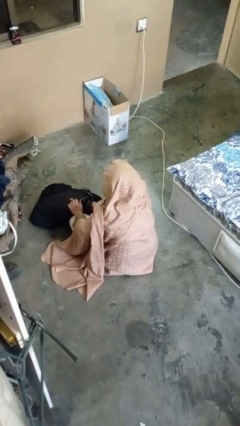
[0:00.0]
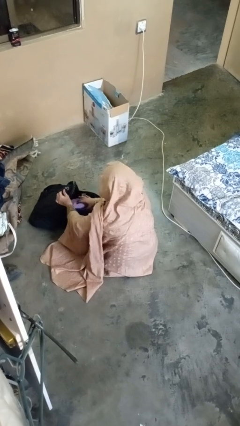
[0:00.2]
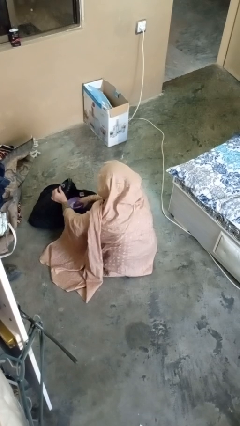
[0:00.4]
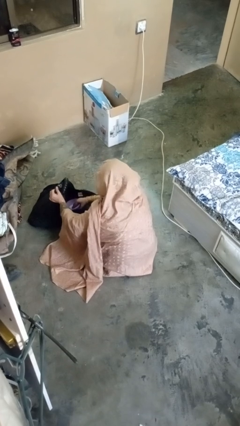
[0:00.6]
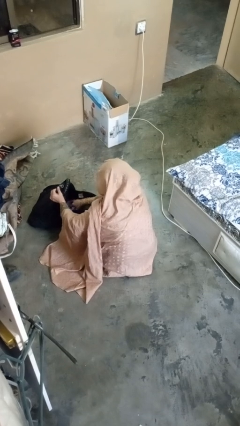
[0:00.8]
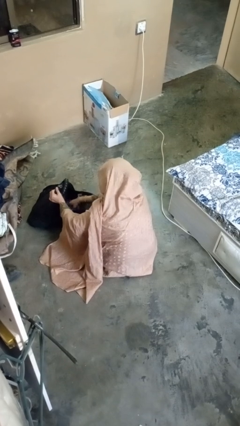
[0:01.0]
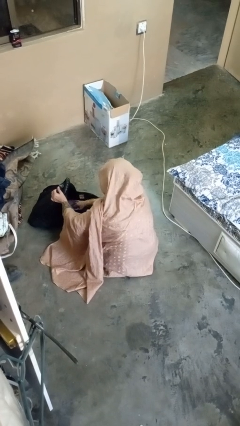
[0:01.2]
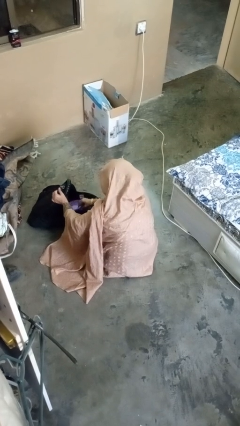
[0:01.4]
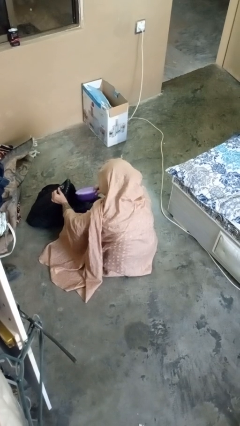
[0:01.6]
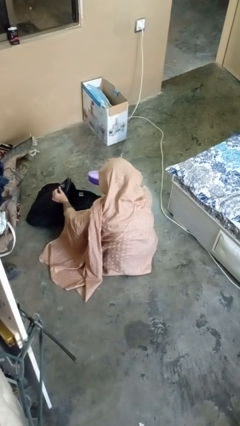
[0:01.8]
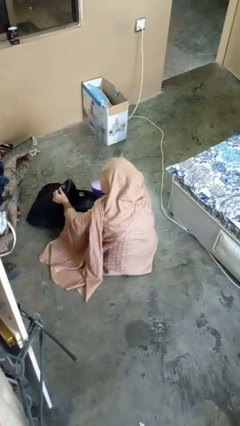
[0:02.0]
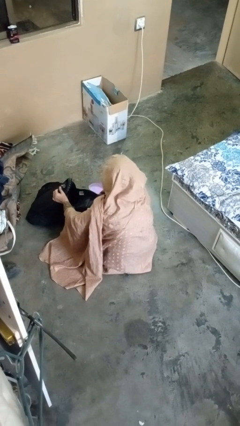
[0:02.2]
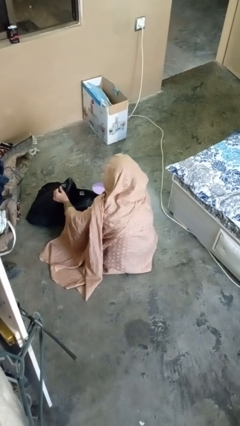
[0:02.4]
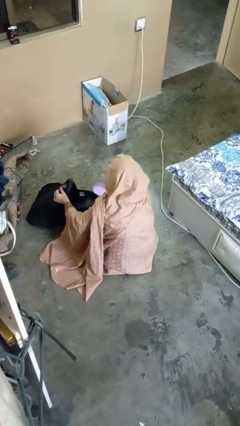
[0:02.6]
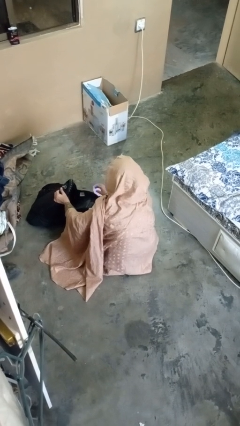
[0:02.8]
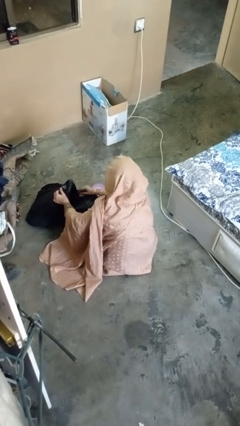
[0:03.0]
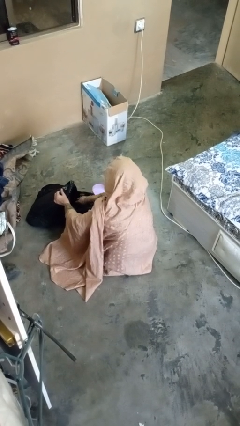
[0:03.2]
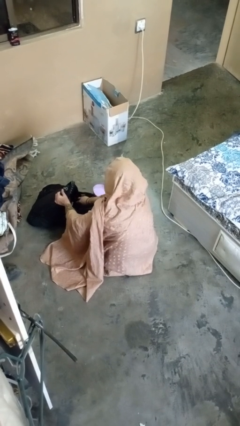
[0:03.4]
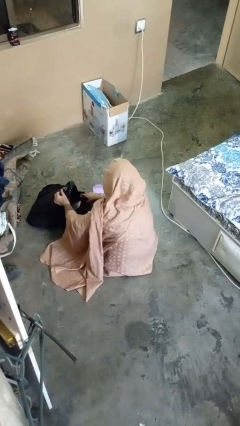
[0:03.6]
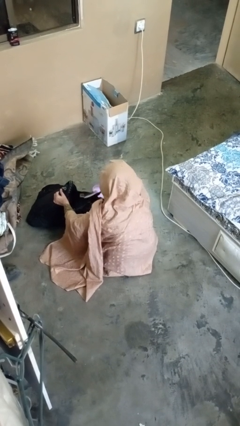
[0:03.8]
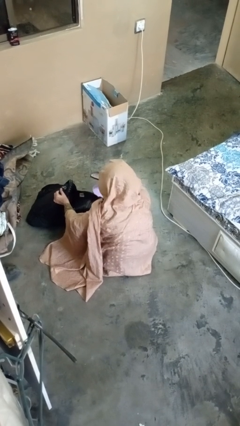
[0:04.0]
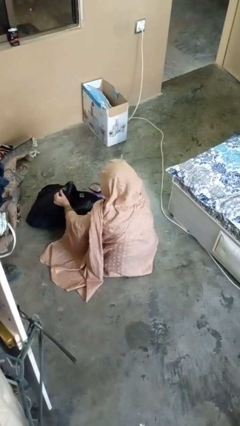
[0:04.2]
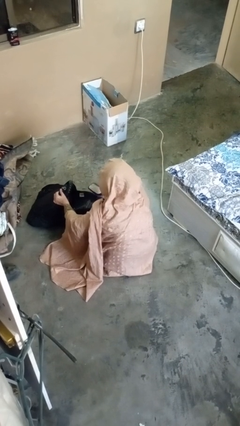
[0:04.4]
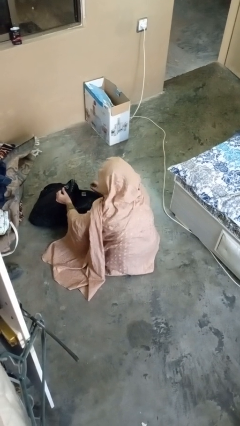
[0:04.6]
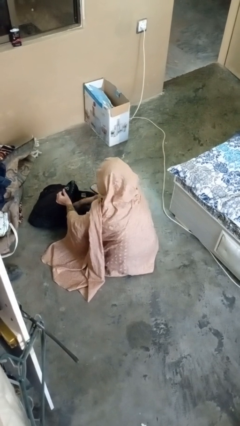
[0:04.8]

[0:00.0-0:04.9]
person searches in backpack

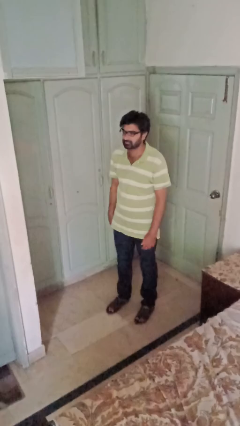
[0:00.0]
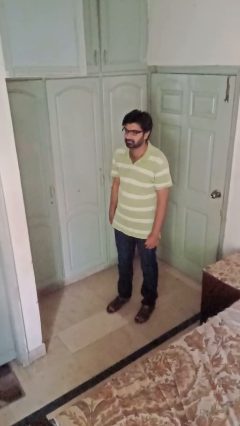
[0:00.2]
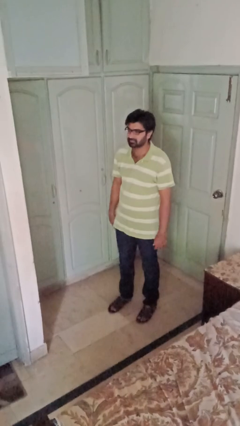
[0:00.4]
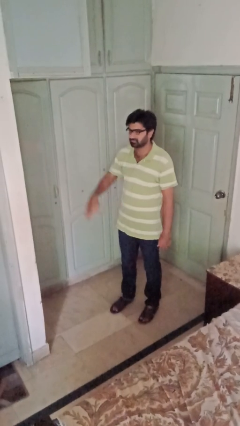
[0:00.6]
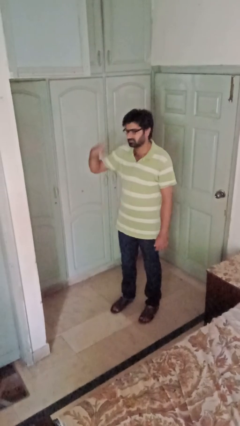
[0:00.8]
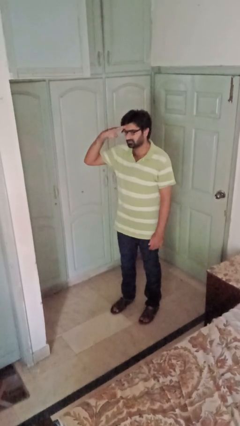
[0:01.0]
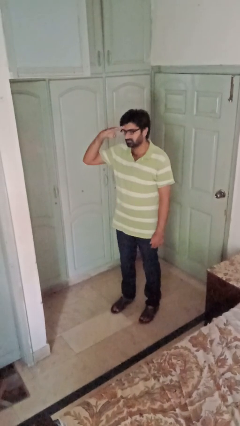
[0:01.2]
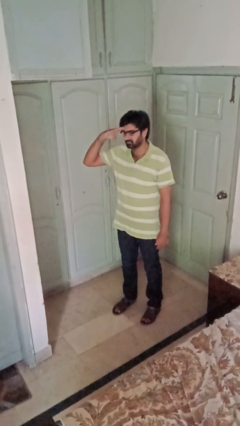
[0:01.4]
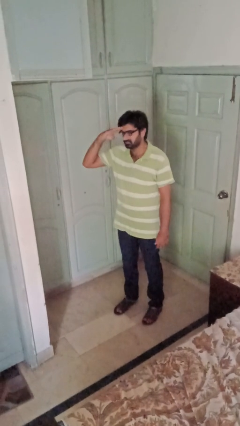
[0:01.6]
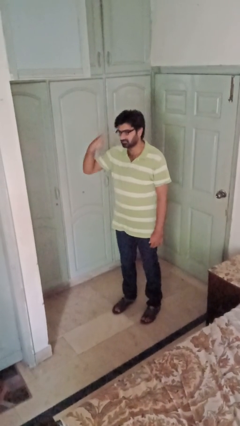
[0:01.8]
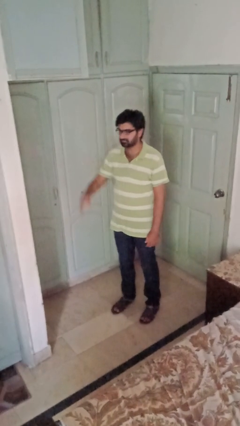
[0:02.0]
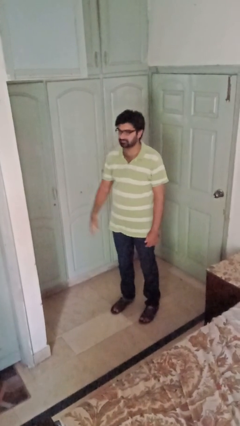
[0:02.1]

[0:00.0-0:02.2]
person salutes

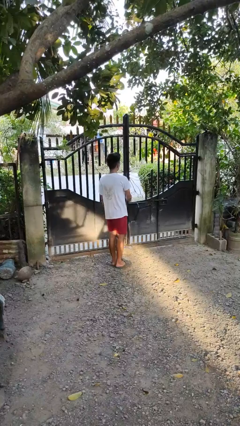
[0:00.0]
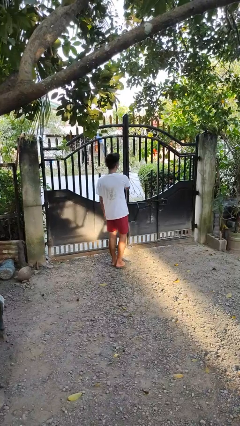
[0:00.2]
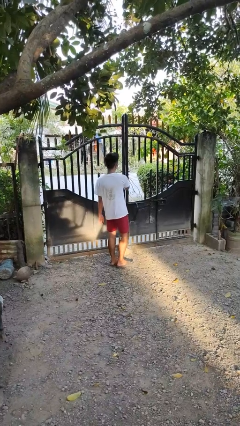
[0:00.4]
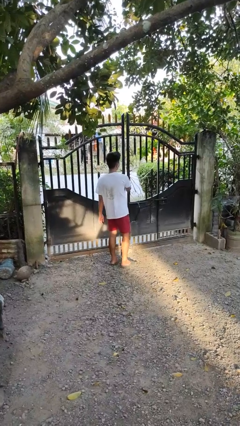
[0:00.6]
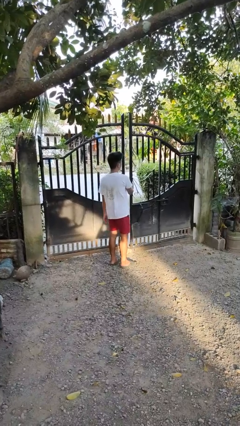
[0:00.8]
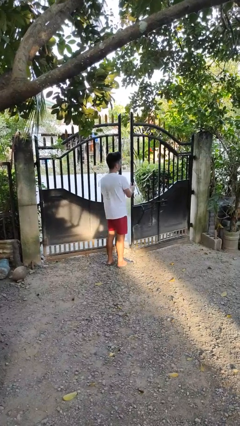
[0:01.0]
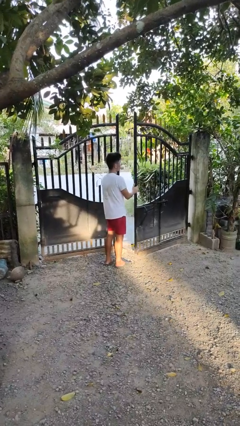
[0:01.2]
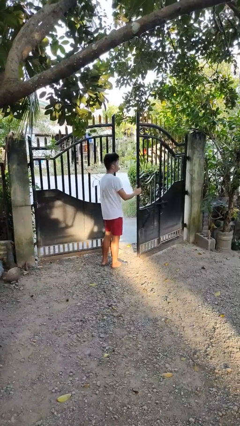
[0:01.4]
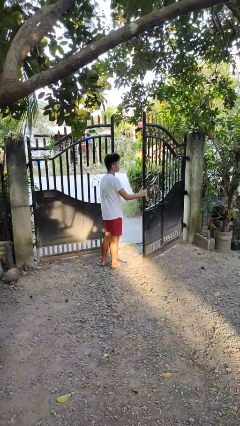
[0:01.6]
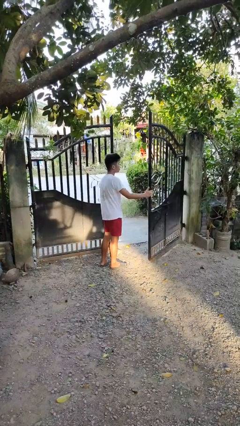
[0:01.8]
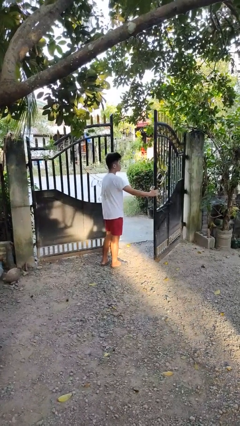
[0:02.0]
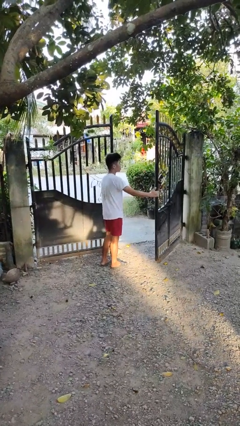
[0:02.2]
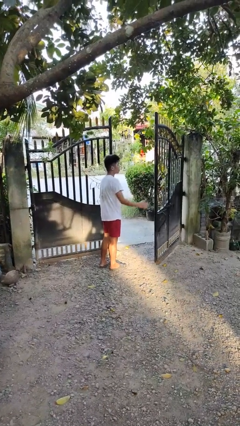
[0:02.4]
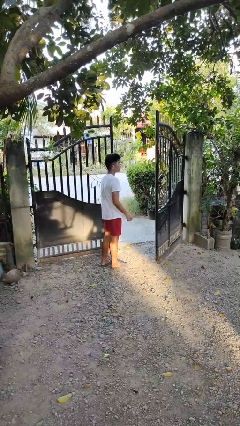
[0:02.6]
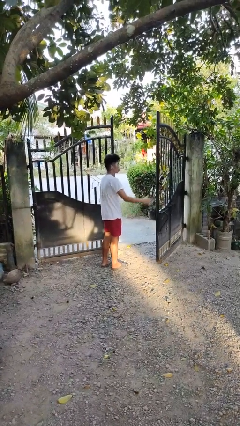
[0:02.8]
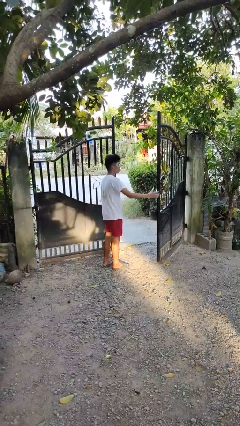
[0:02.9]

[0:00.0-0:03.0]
person opens gate

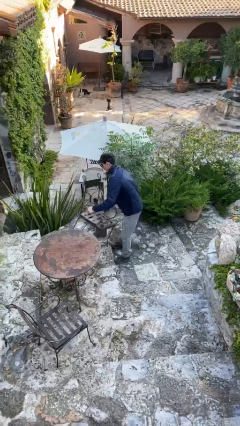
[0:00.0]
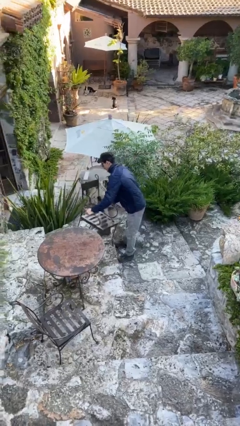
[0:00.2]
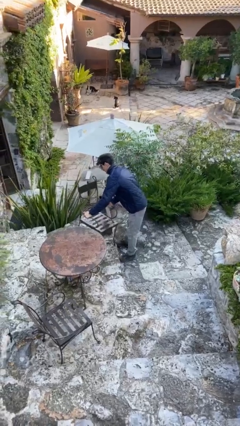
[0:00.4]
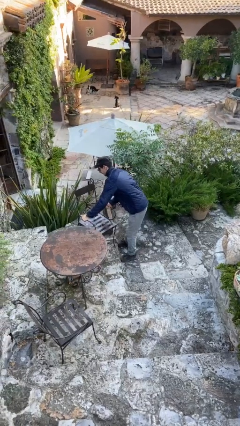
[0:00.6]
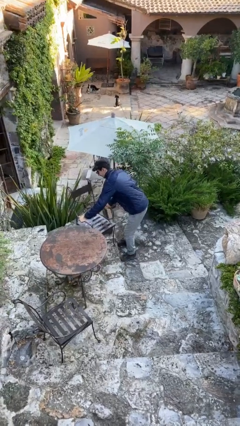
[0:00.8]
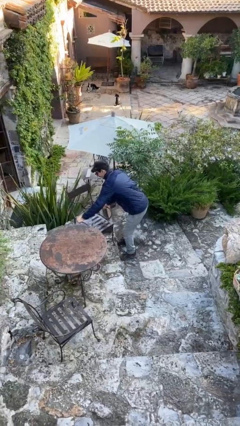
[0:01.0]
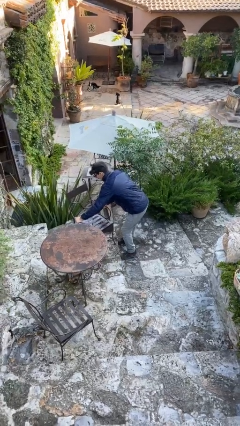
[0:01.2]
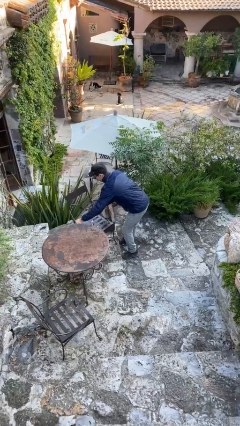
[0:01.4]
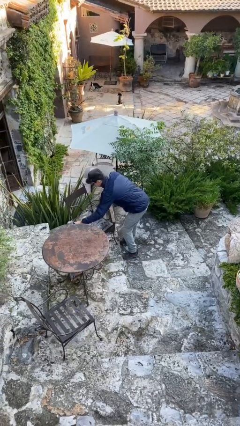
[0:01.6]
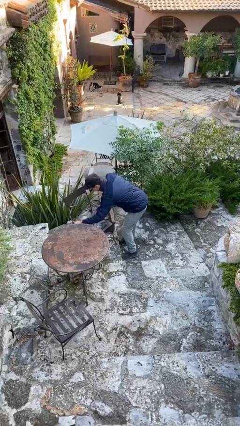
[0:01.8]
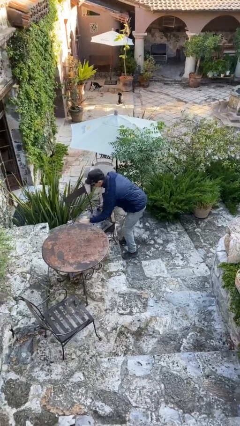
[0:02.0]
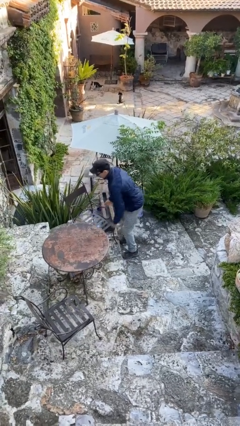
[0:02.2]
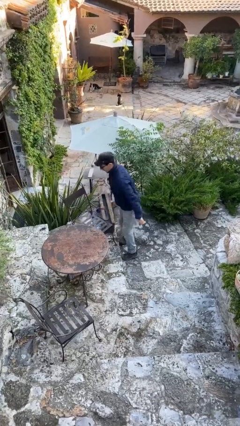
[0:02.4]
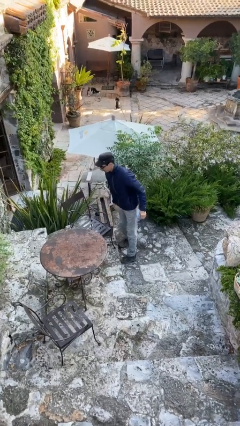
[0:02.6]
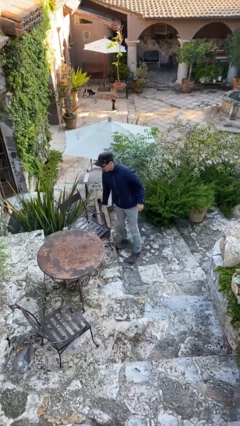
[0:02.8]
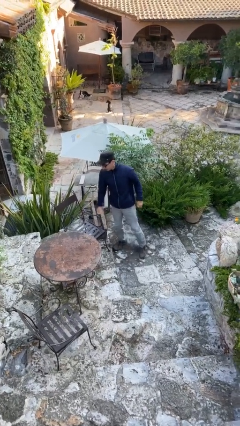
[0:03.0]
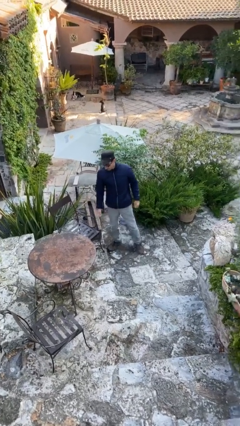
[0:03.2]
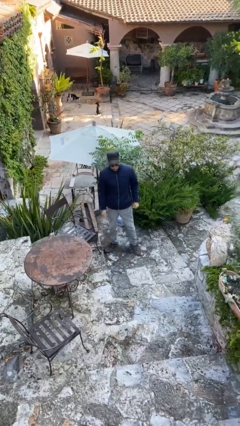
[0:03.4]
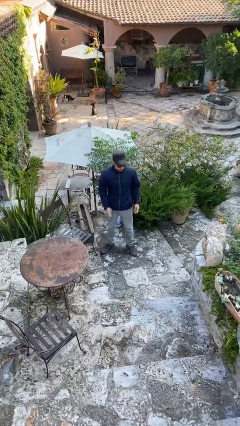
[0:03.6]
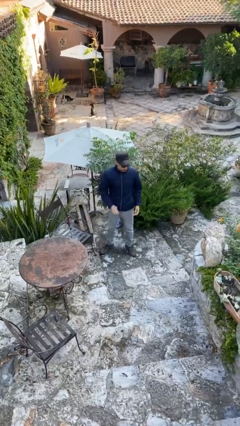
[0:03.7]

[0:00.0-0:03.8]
person puts down object on floor

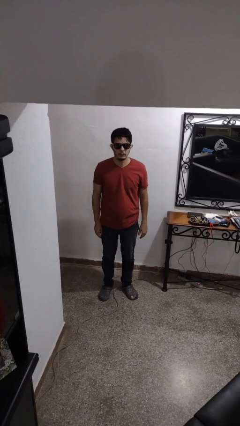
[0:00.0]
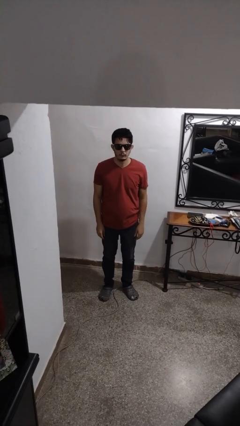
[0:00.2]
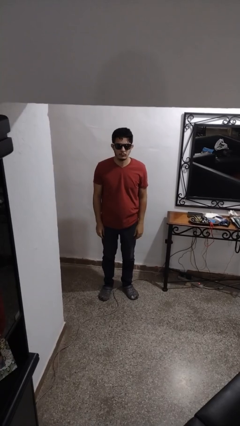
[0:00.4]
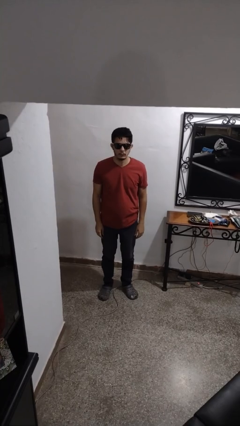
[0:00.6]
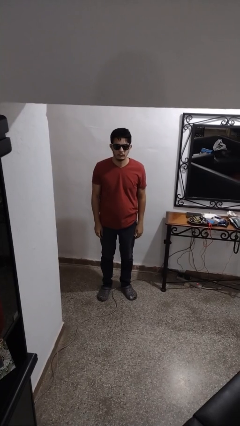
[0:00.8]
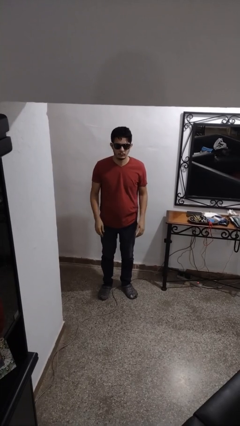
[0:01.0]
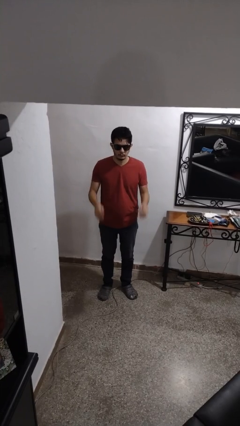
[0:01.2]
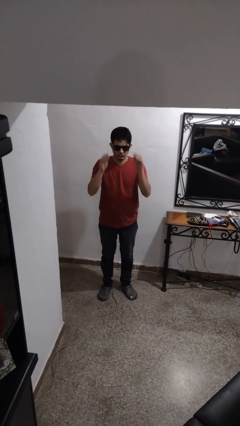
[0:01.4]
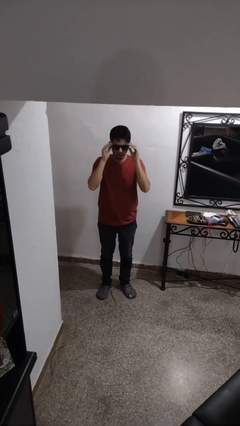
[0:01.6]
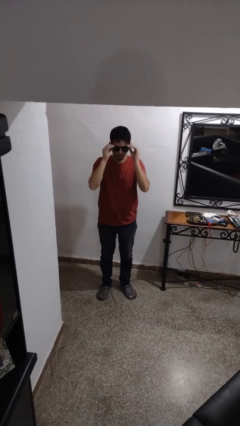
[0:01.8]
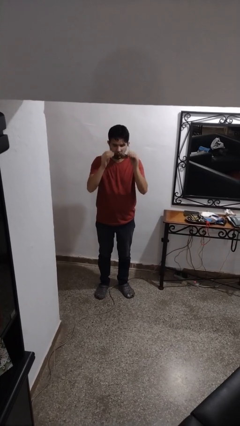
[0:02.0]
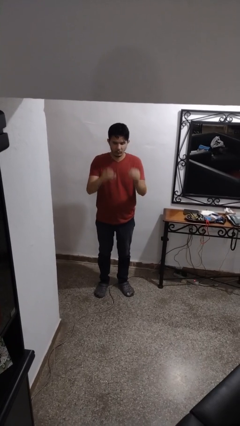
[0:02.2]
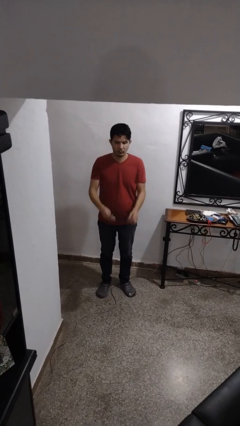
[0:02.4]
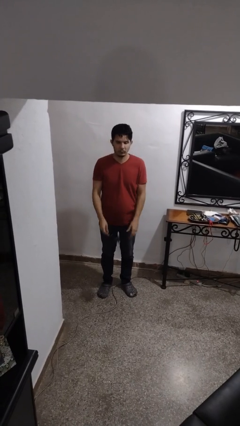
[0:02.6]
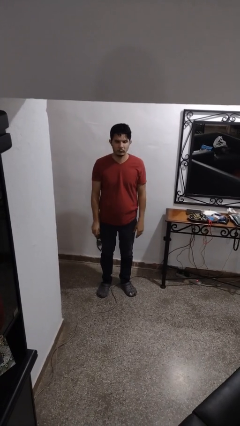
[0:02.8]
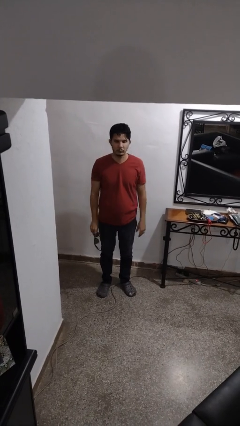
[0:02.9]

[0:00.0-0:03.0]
person takes off sunglasses

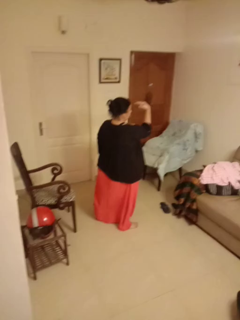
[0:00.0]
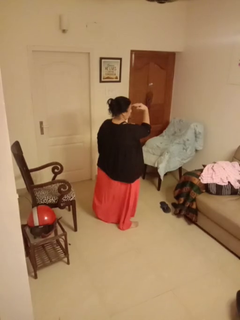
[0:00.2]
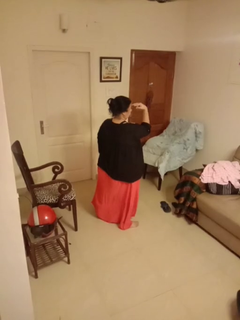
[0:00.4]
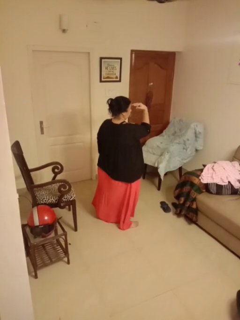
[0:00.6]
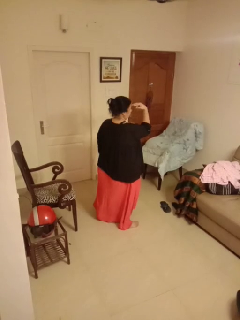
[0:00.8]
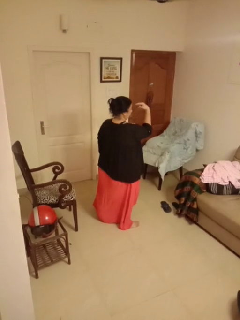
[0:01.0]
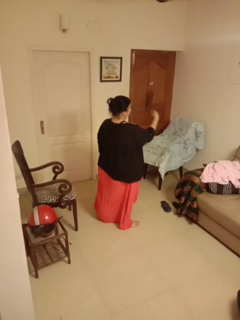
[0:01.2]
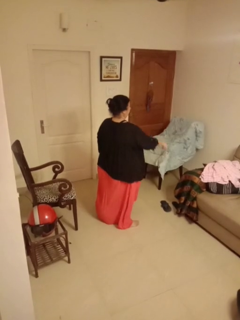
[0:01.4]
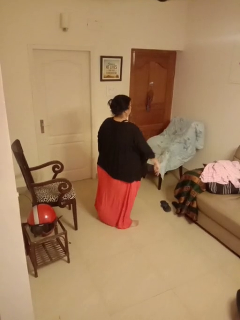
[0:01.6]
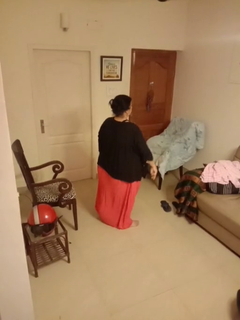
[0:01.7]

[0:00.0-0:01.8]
person gestures watch closely
